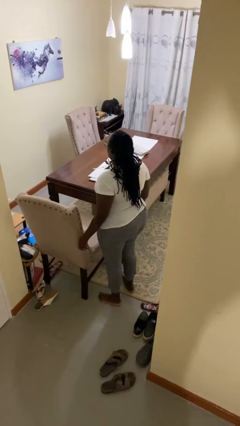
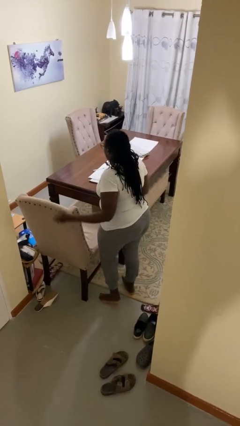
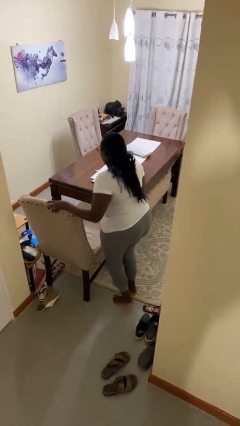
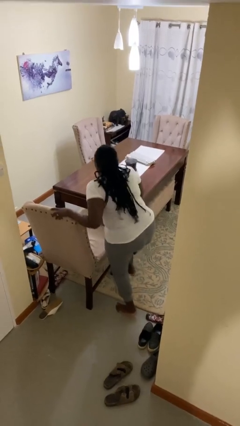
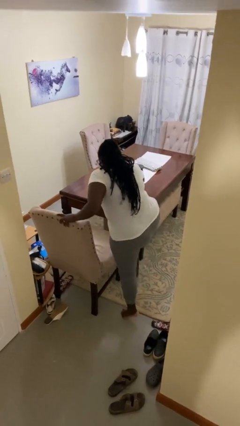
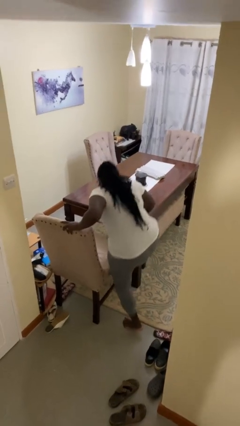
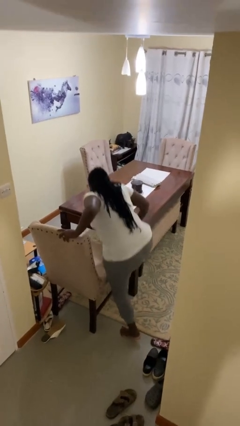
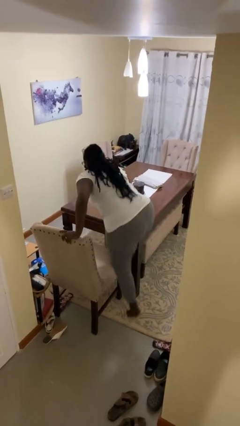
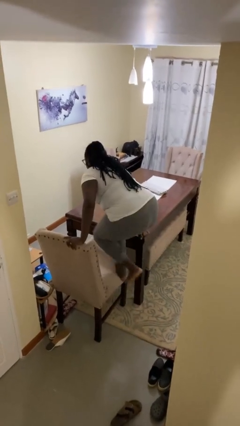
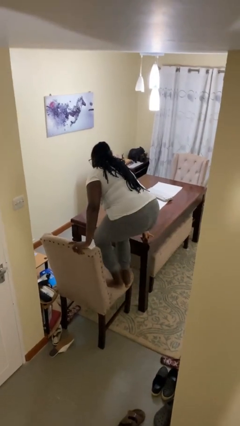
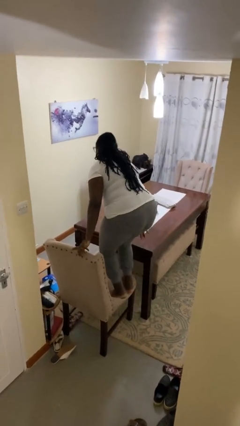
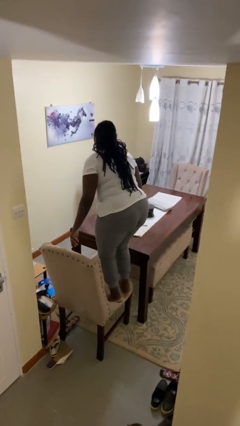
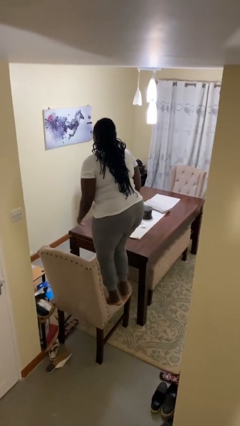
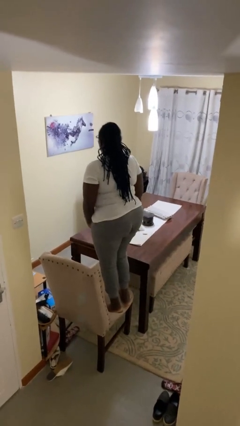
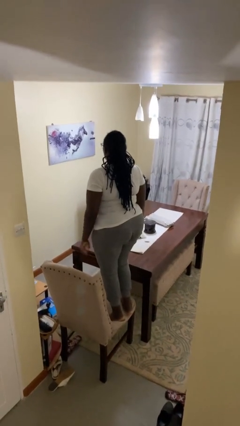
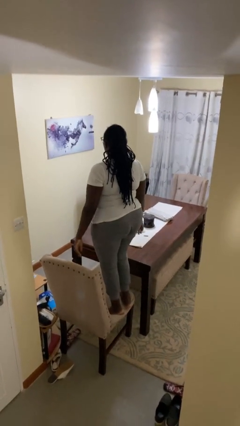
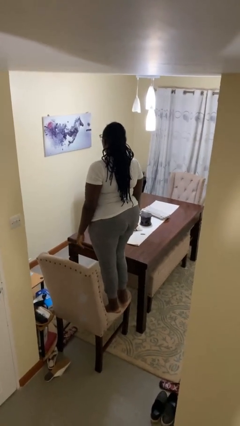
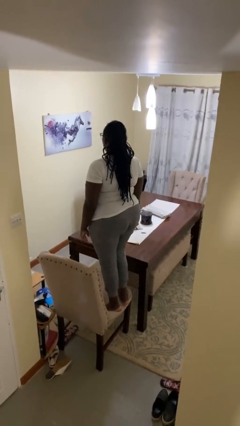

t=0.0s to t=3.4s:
person climbs on chair

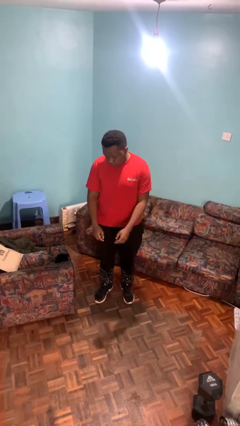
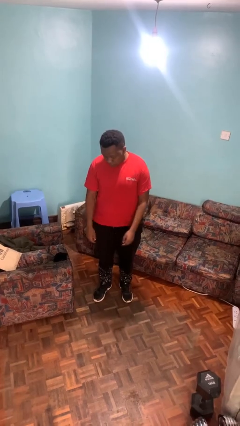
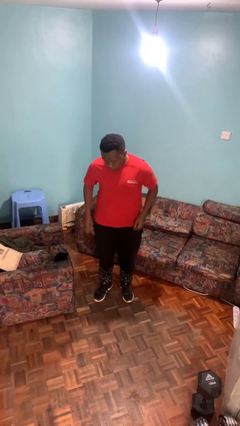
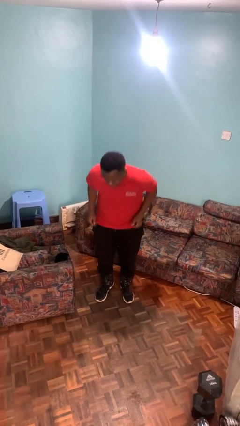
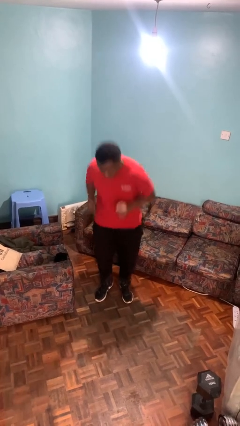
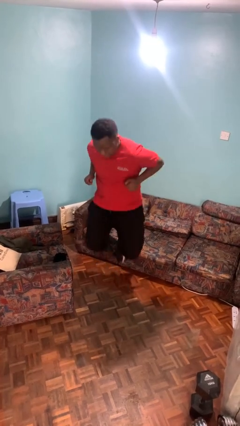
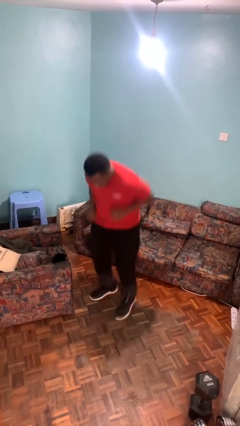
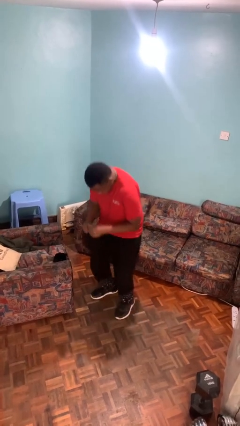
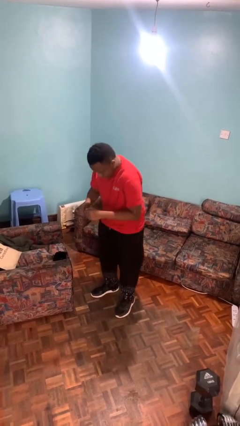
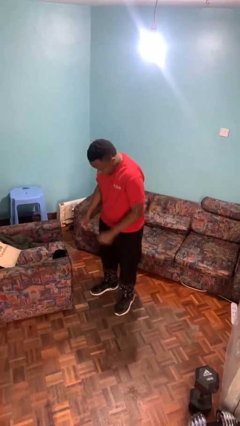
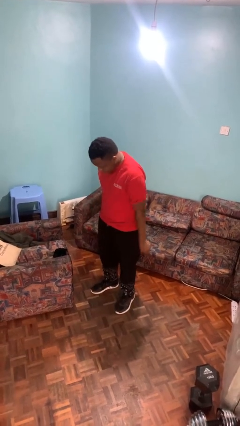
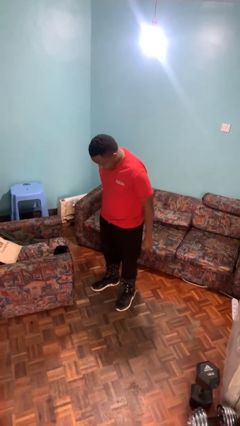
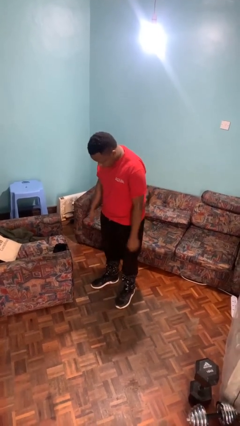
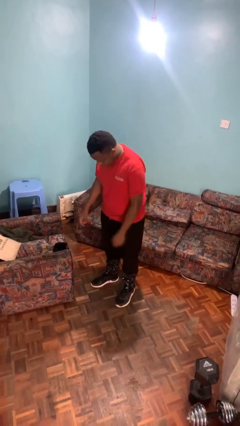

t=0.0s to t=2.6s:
person jumps

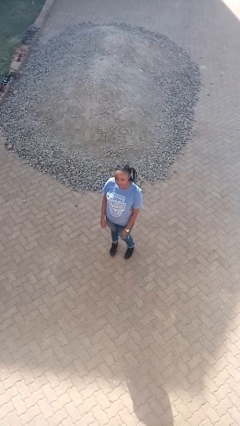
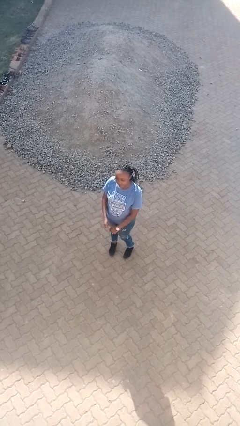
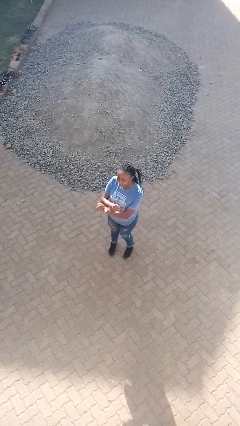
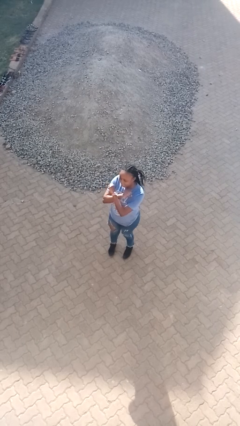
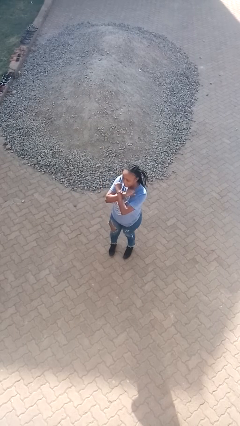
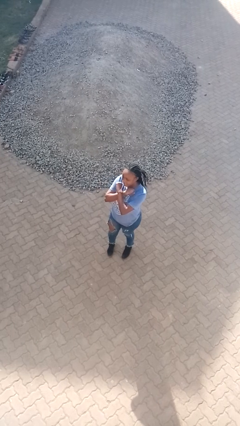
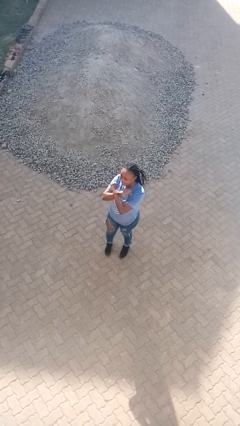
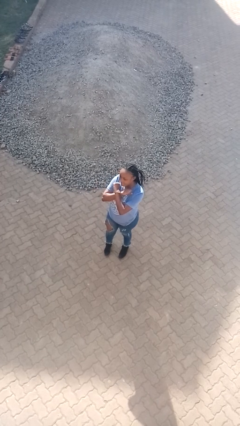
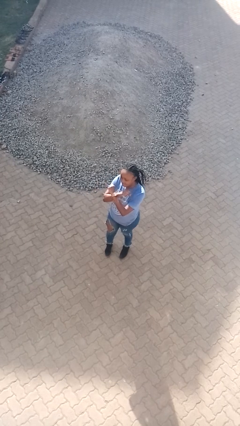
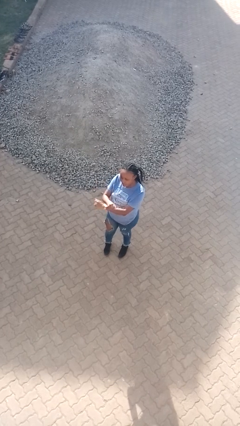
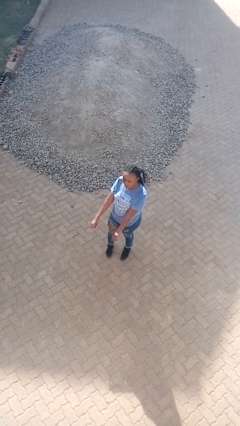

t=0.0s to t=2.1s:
person gestures arms x

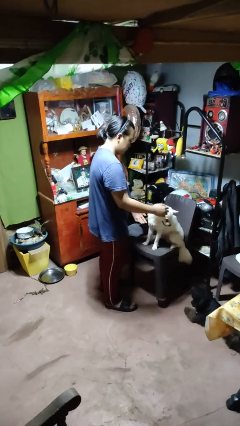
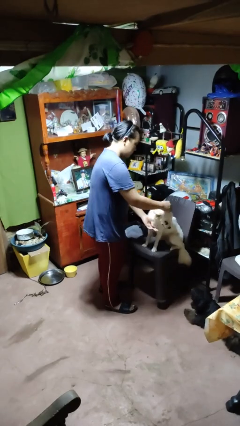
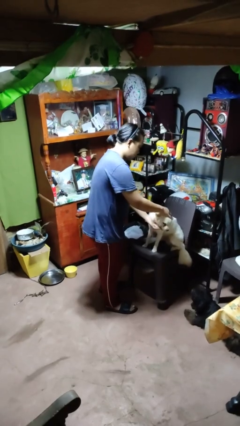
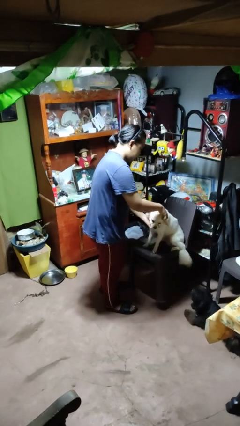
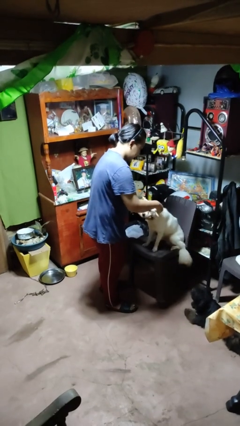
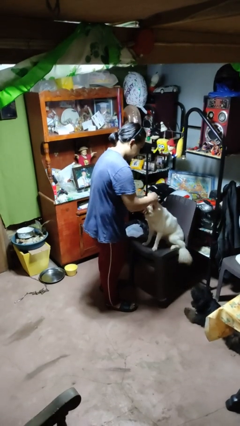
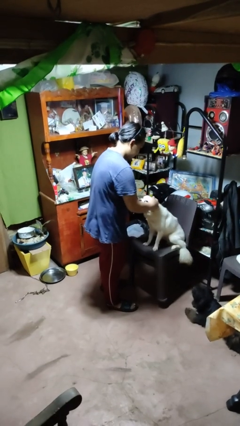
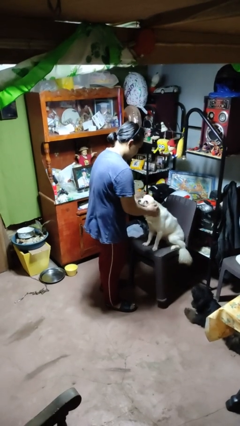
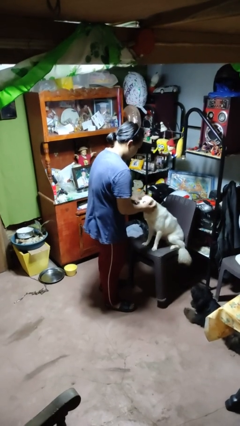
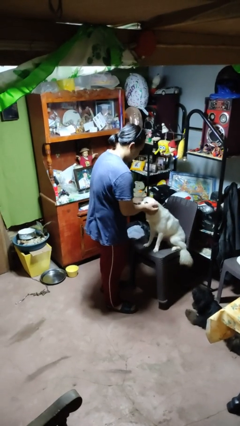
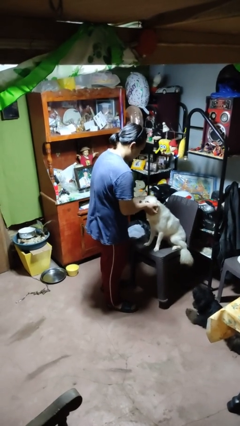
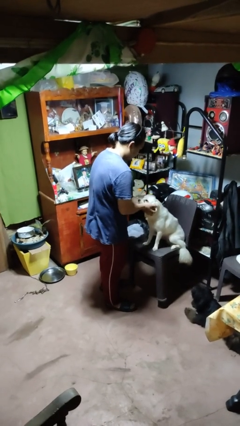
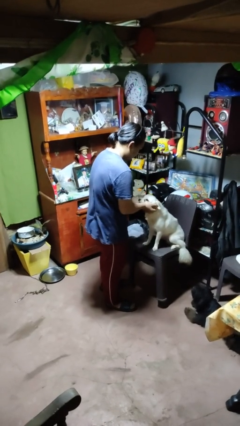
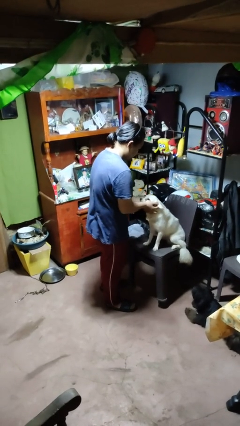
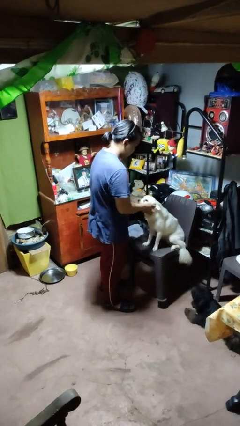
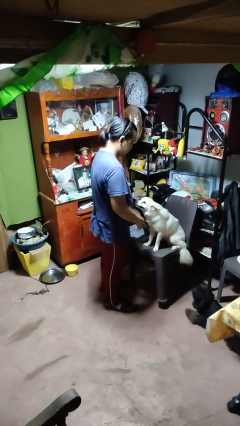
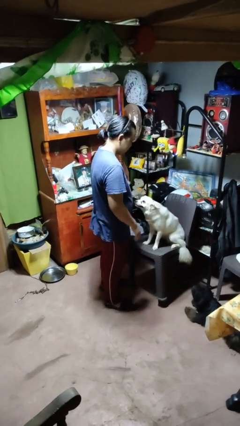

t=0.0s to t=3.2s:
person pets dog

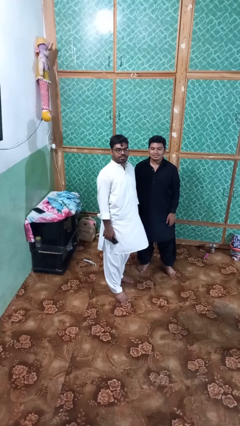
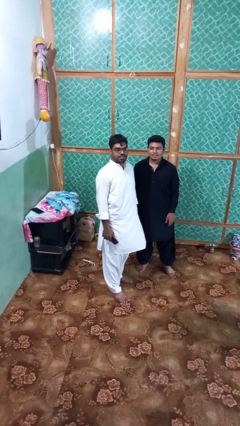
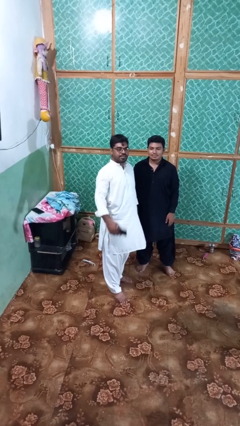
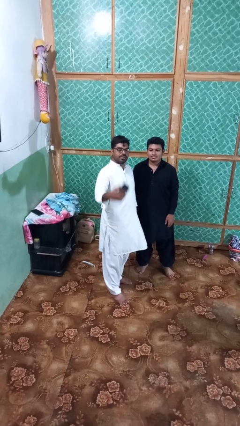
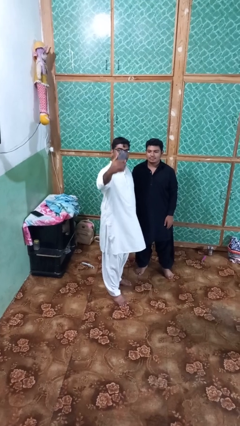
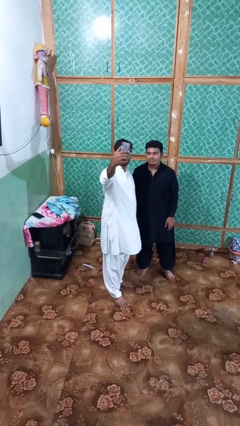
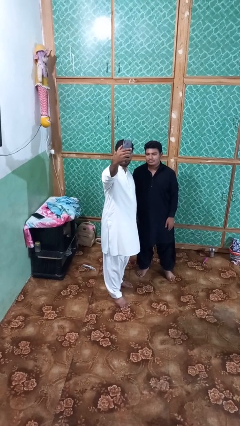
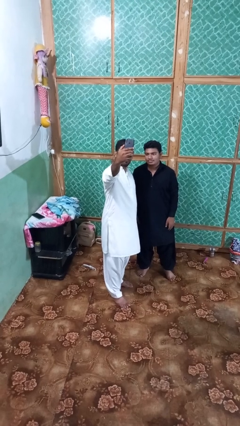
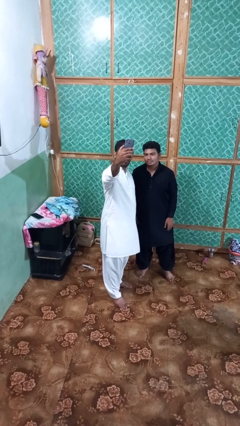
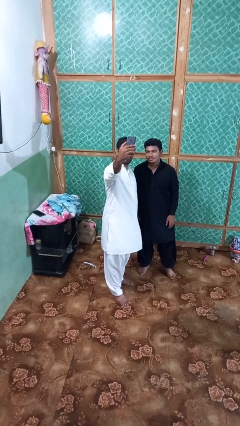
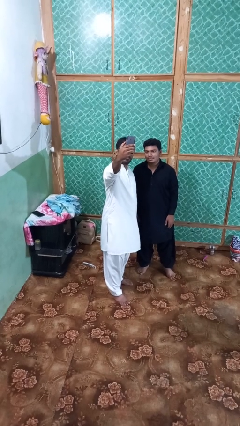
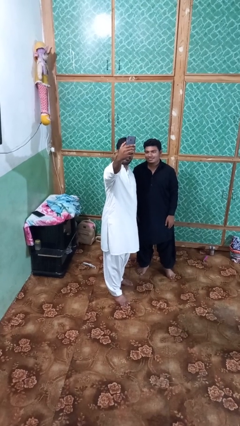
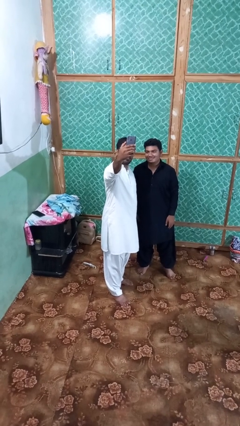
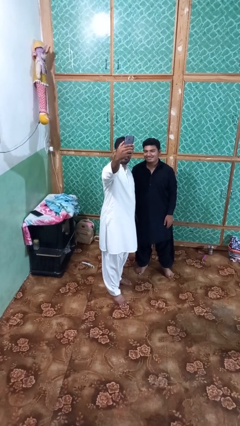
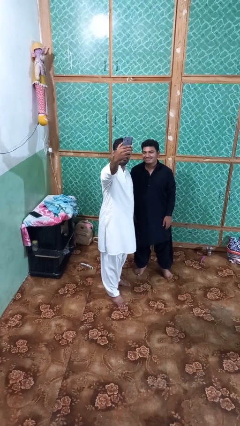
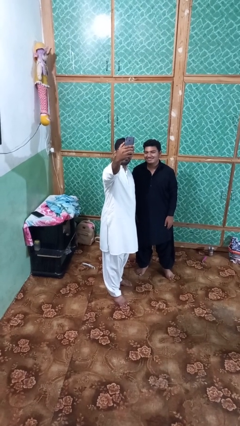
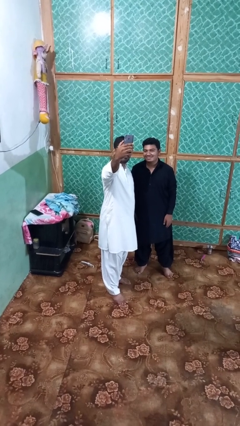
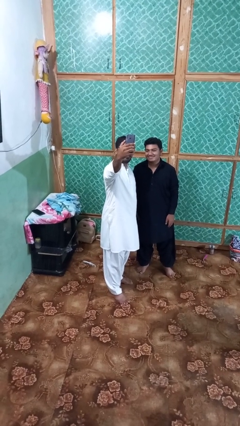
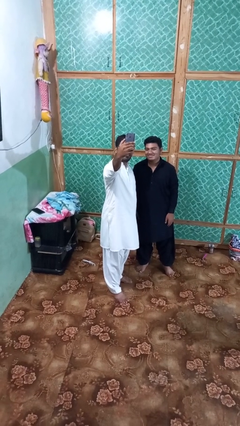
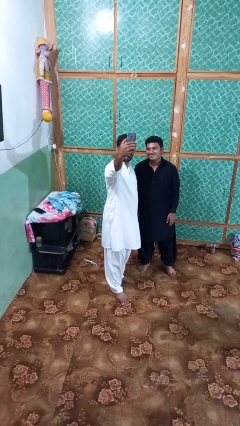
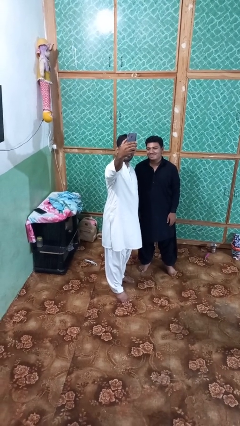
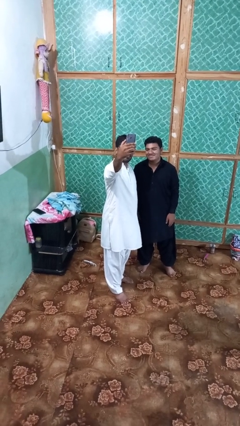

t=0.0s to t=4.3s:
person takes selfie with person

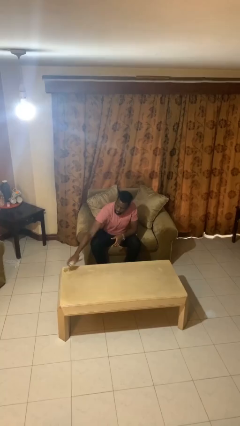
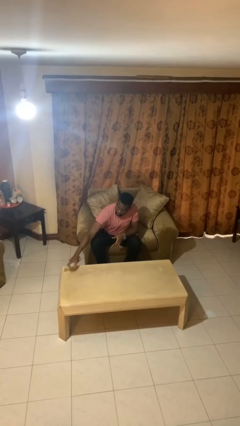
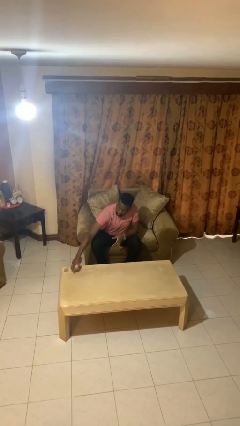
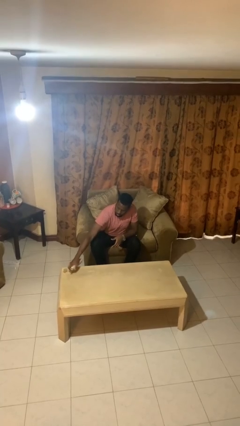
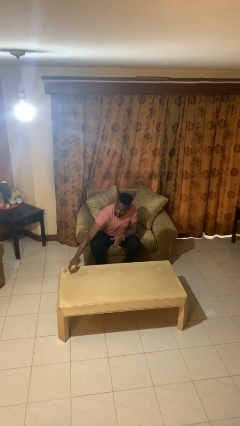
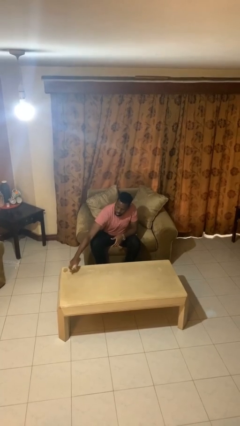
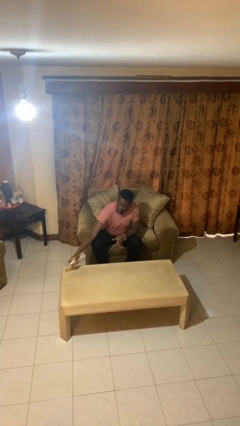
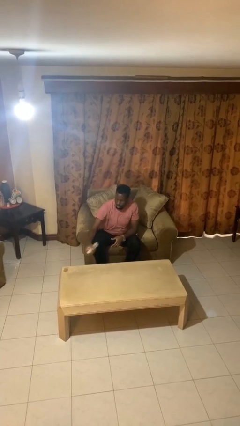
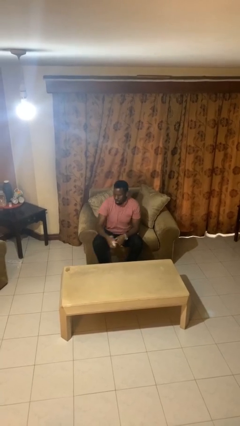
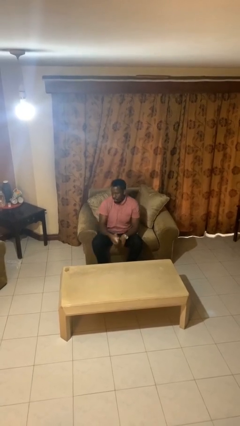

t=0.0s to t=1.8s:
person sprays from bottle
